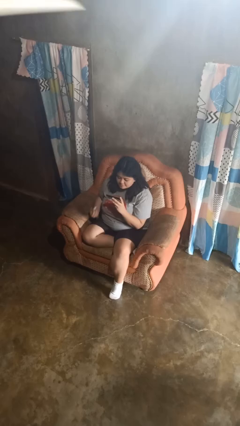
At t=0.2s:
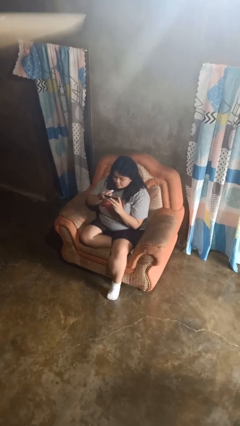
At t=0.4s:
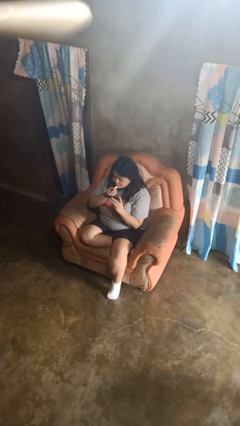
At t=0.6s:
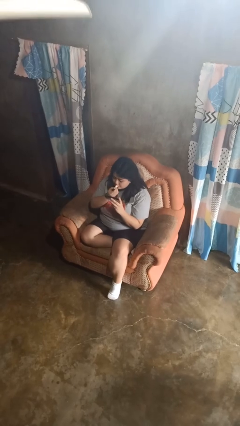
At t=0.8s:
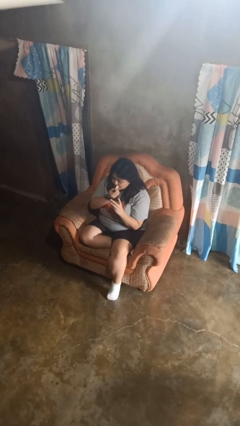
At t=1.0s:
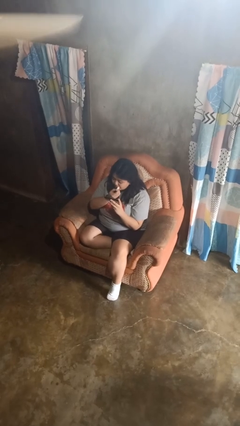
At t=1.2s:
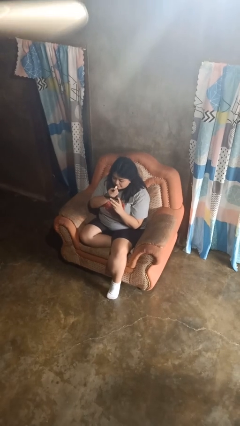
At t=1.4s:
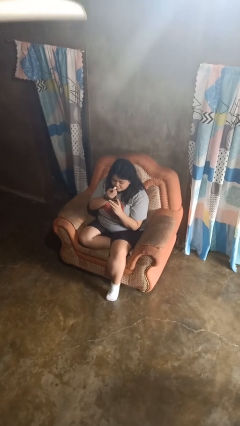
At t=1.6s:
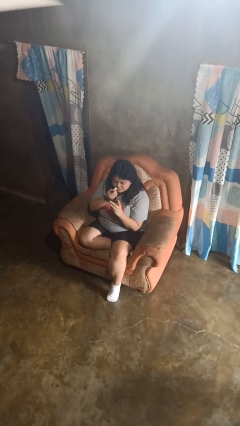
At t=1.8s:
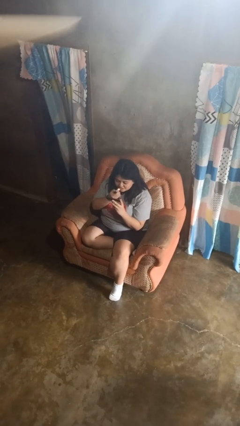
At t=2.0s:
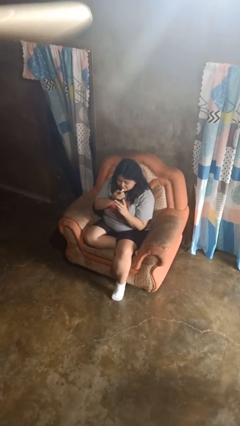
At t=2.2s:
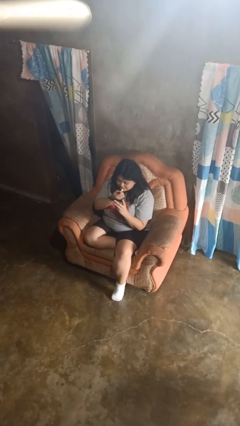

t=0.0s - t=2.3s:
person applies lip makeup

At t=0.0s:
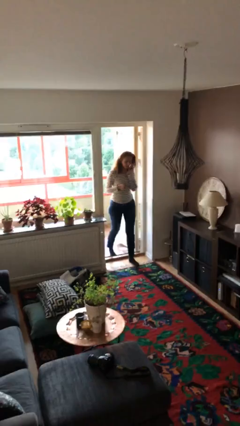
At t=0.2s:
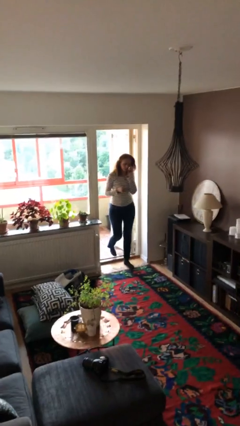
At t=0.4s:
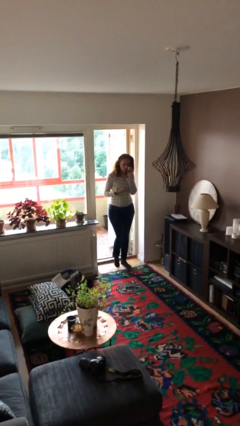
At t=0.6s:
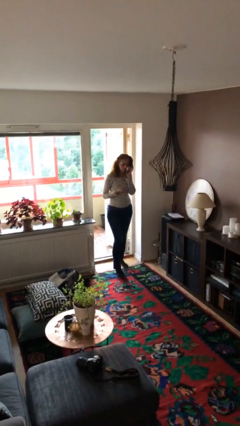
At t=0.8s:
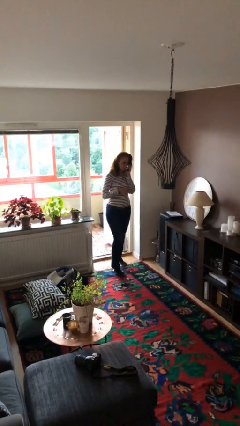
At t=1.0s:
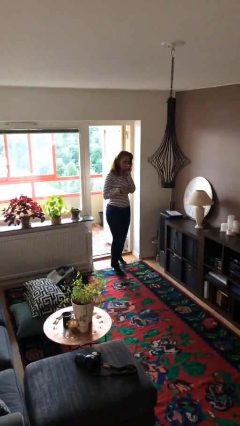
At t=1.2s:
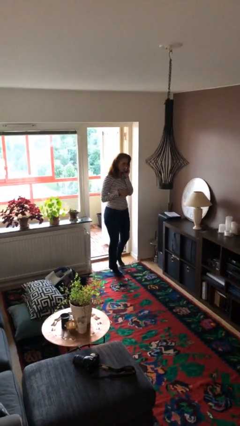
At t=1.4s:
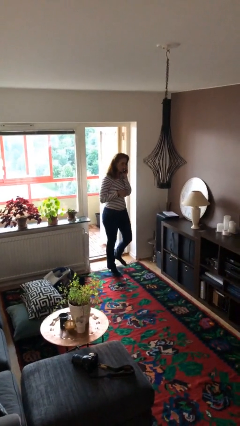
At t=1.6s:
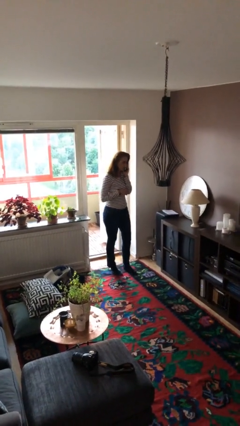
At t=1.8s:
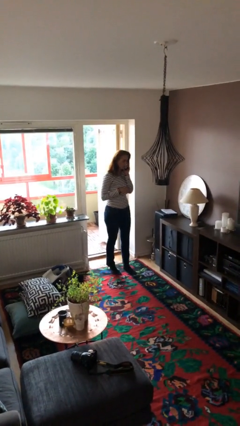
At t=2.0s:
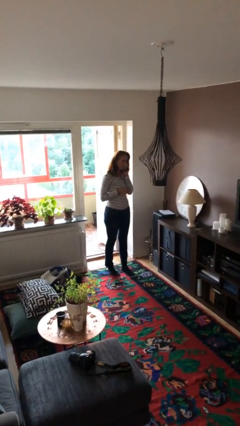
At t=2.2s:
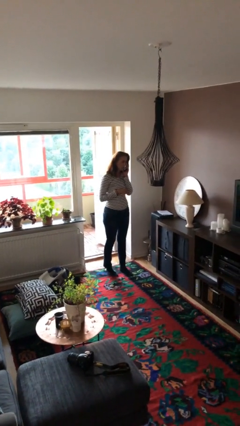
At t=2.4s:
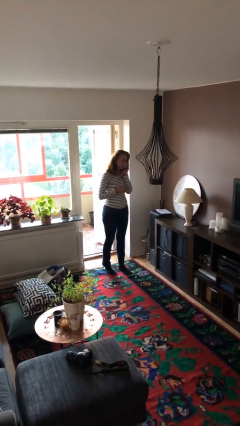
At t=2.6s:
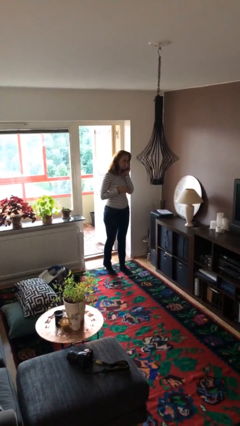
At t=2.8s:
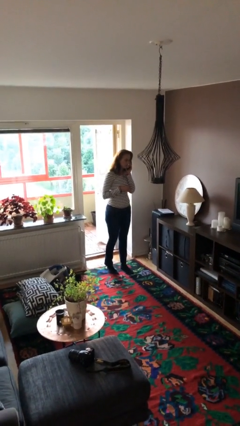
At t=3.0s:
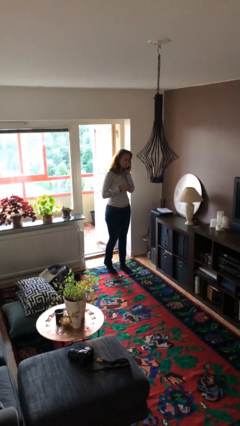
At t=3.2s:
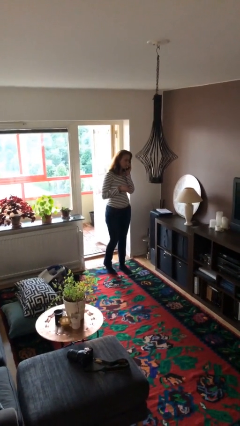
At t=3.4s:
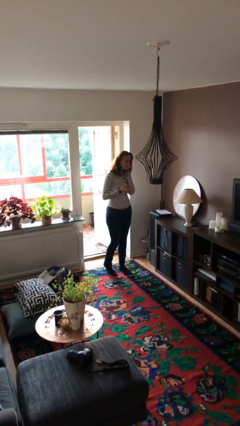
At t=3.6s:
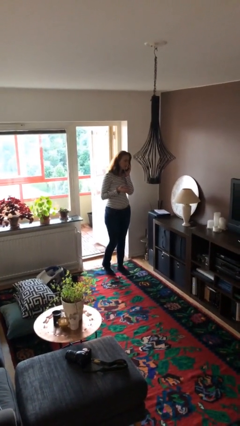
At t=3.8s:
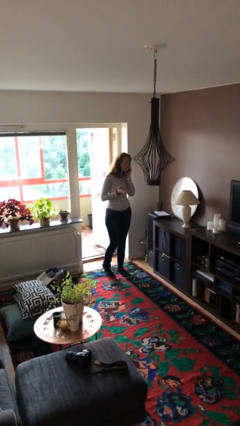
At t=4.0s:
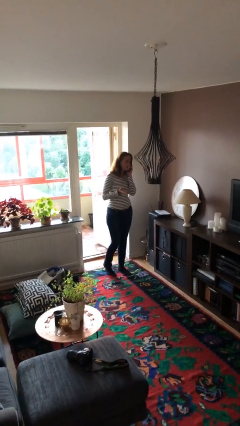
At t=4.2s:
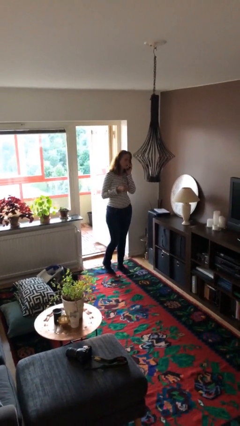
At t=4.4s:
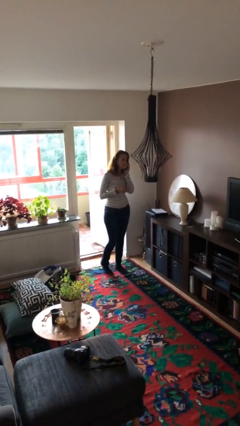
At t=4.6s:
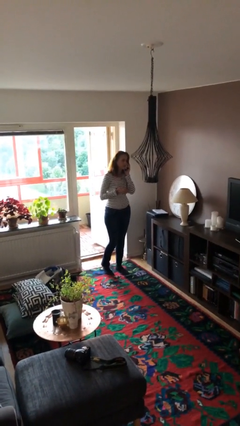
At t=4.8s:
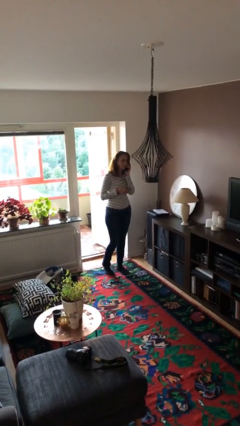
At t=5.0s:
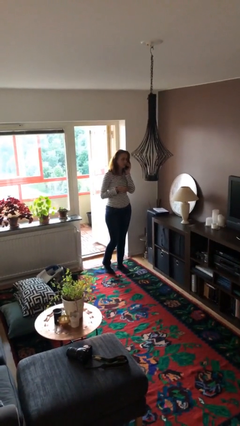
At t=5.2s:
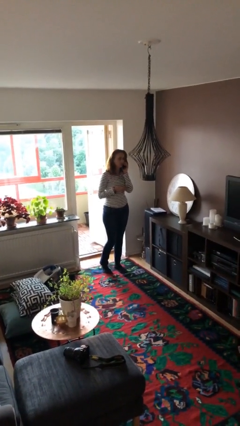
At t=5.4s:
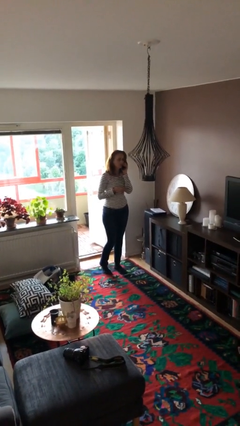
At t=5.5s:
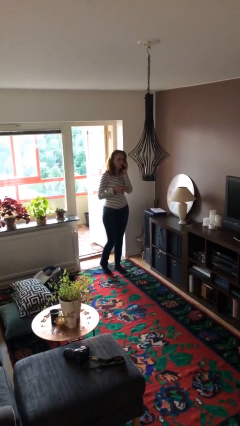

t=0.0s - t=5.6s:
person enters scene through structure

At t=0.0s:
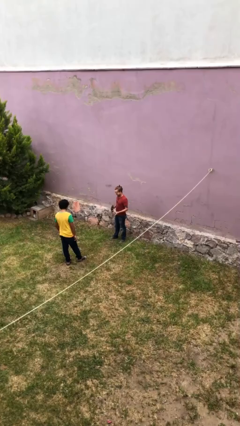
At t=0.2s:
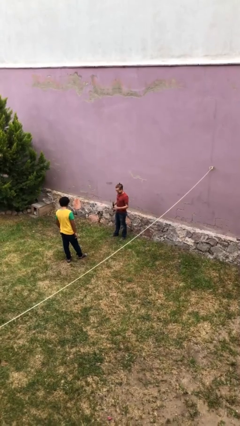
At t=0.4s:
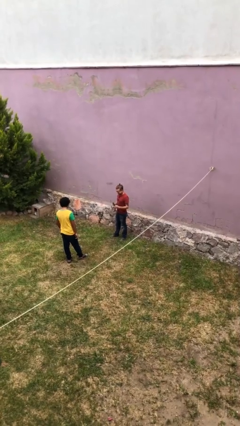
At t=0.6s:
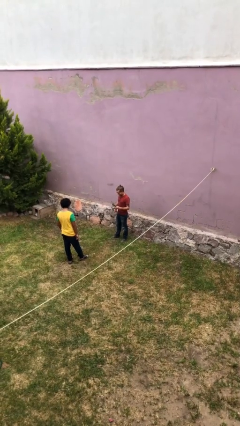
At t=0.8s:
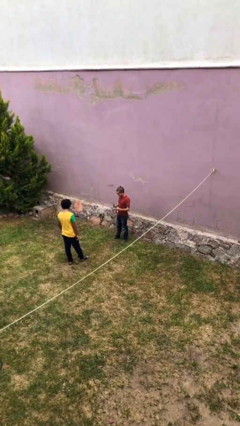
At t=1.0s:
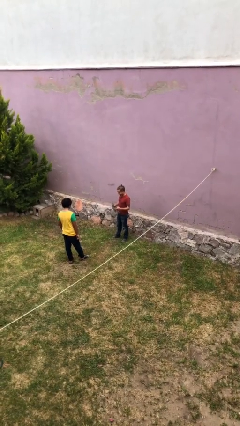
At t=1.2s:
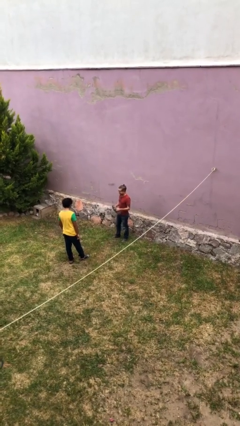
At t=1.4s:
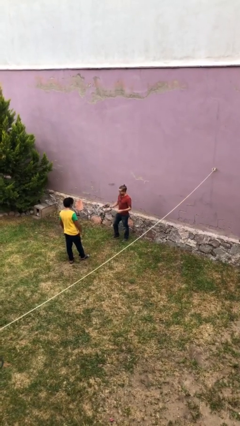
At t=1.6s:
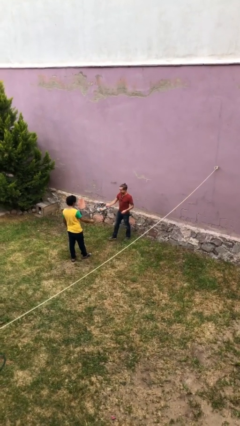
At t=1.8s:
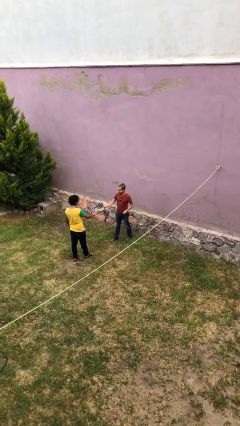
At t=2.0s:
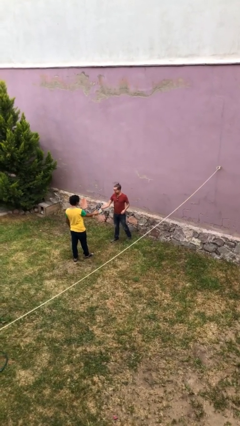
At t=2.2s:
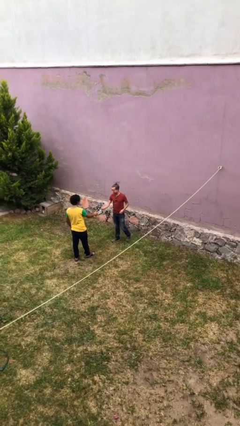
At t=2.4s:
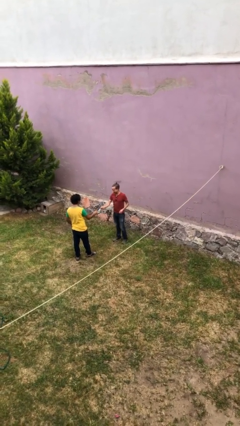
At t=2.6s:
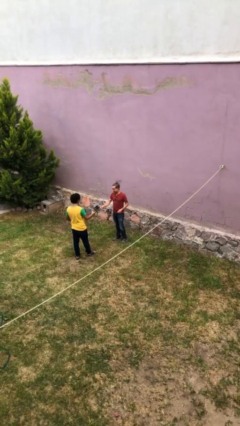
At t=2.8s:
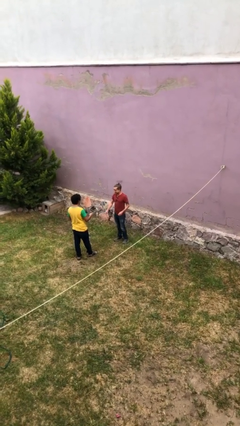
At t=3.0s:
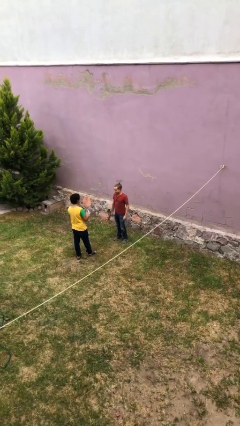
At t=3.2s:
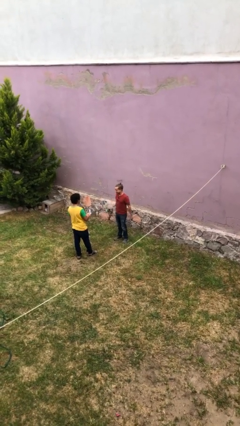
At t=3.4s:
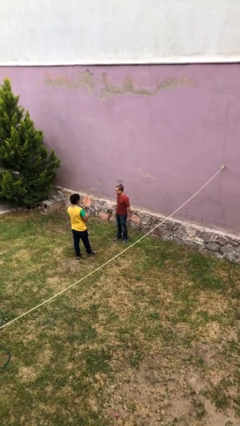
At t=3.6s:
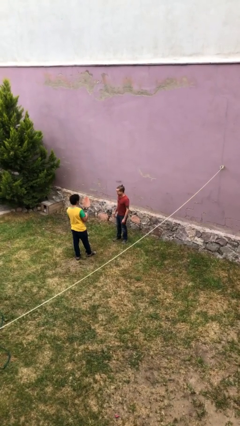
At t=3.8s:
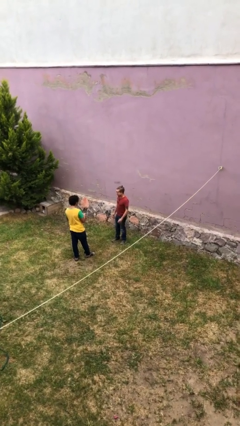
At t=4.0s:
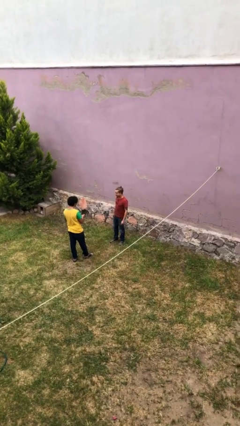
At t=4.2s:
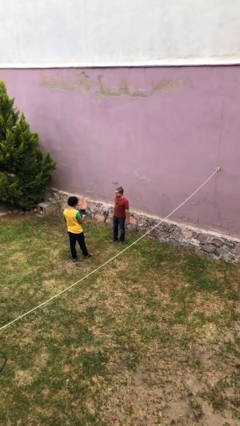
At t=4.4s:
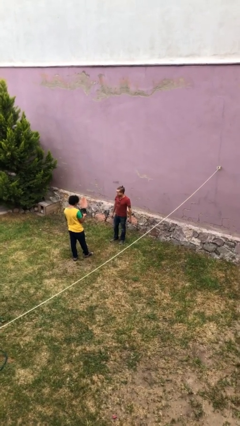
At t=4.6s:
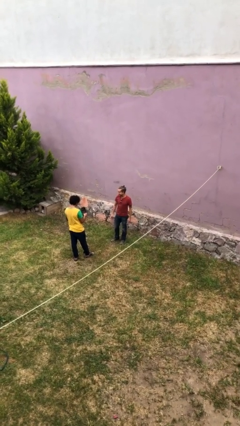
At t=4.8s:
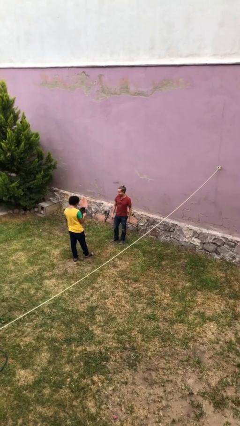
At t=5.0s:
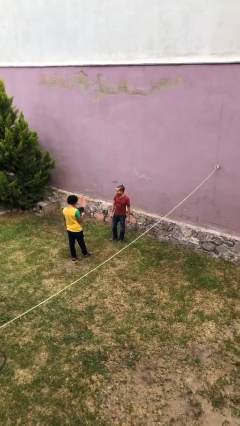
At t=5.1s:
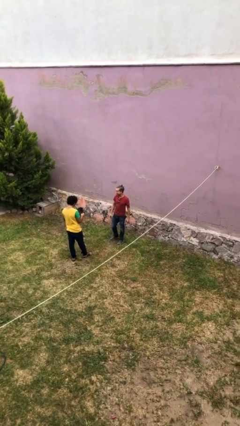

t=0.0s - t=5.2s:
person transfers object to person

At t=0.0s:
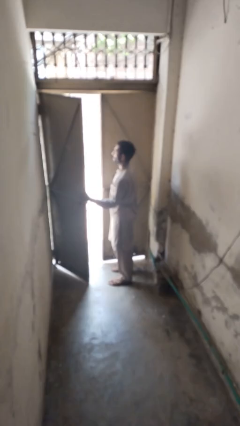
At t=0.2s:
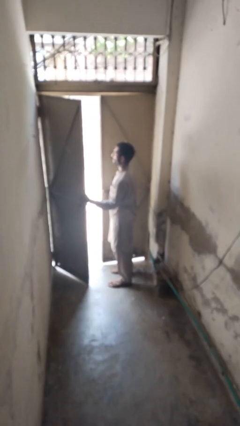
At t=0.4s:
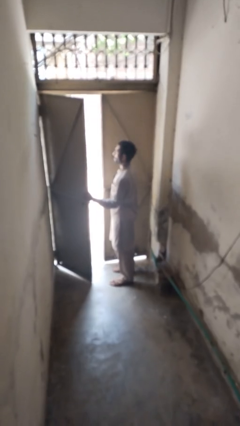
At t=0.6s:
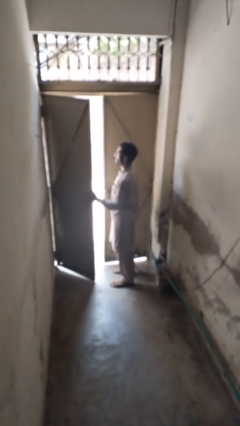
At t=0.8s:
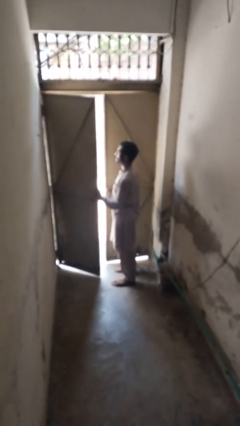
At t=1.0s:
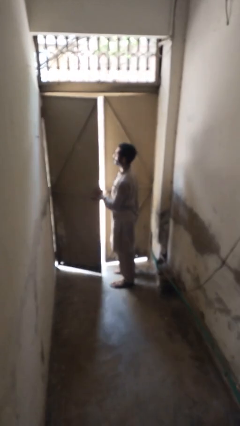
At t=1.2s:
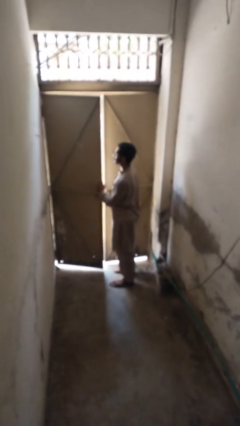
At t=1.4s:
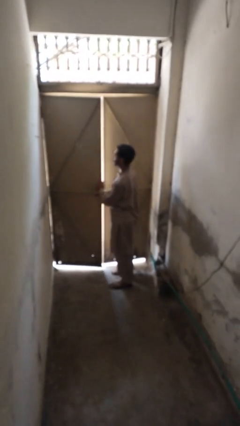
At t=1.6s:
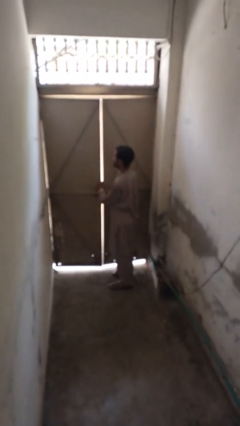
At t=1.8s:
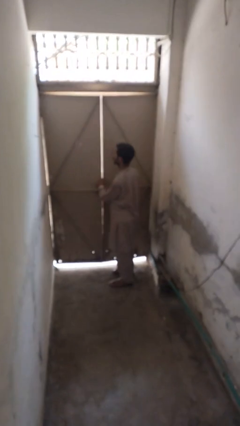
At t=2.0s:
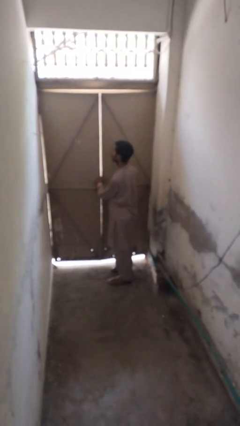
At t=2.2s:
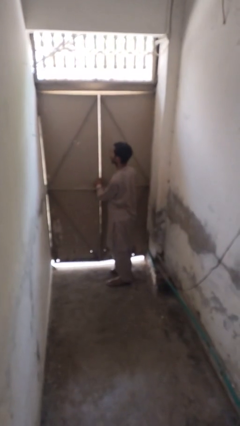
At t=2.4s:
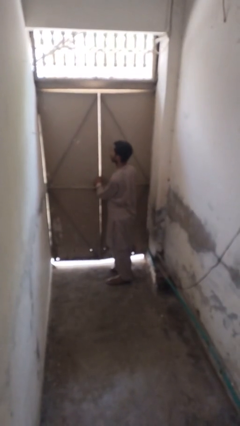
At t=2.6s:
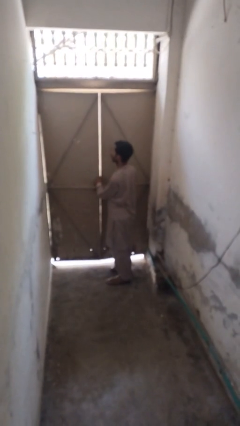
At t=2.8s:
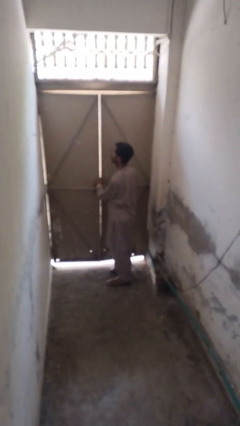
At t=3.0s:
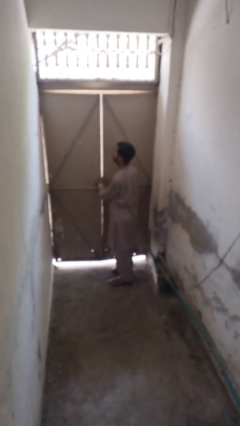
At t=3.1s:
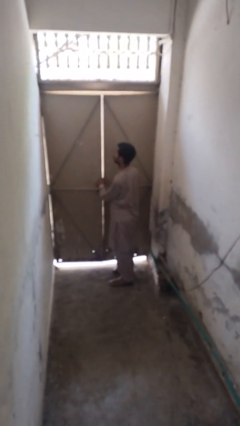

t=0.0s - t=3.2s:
person closes gate

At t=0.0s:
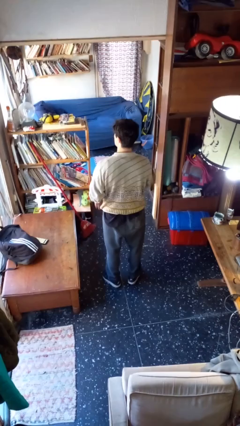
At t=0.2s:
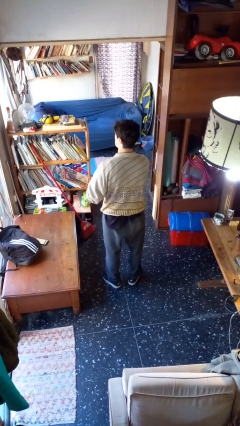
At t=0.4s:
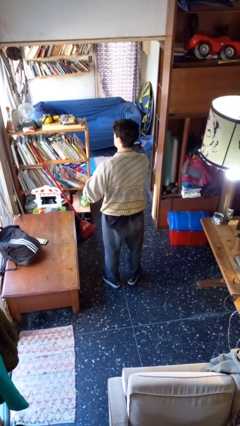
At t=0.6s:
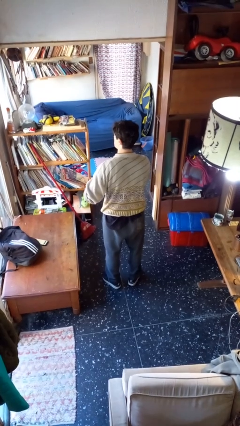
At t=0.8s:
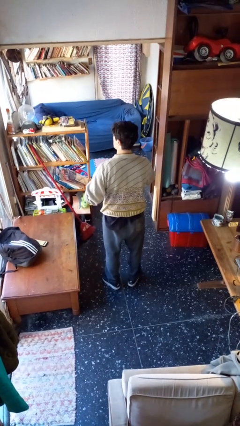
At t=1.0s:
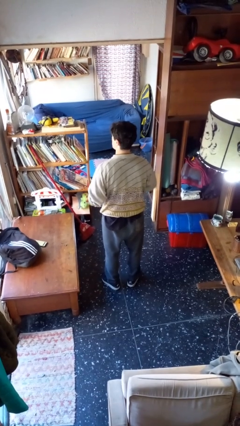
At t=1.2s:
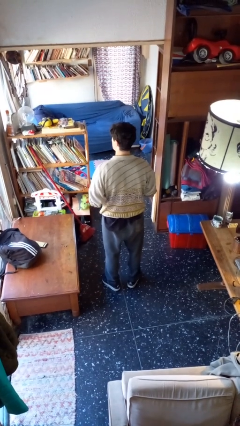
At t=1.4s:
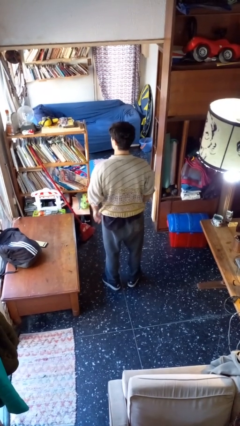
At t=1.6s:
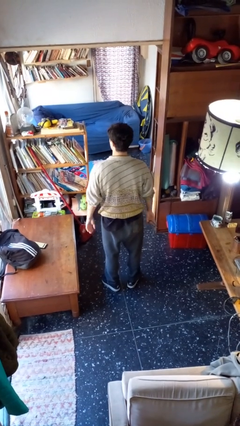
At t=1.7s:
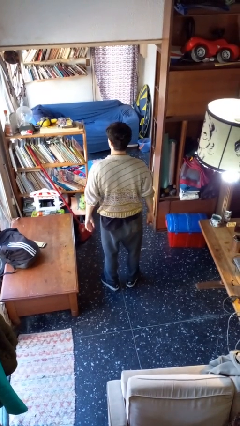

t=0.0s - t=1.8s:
person takes off wristwatch
